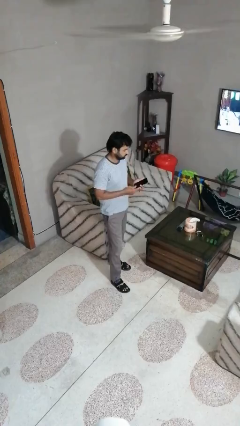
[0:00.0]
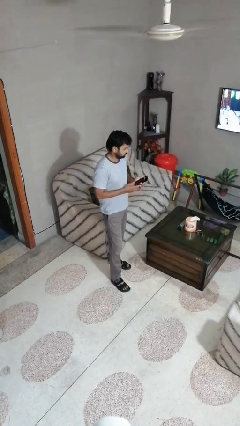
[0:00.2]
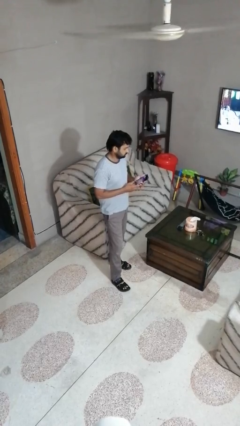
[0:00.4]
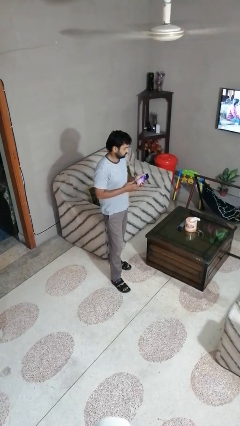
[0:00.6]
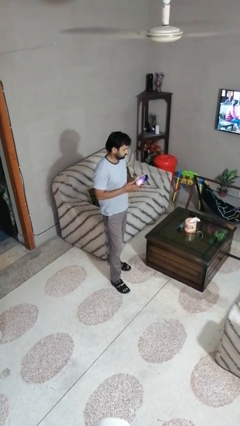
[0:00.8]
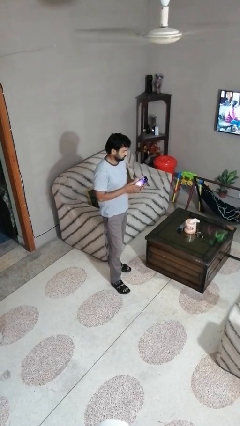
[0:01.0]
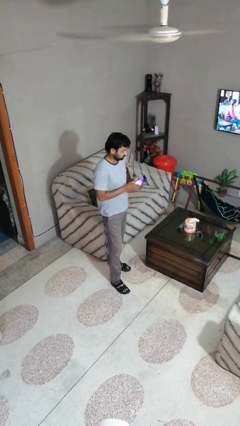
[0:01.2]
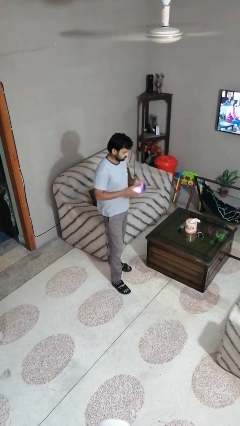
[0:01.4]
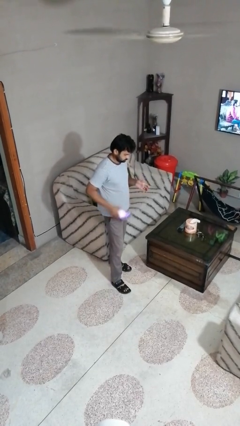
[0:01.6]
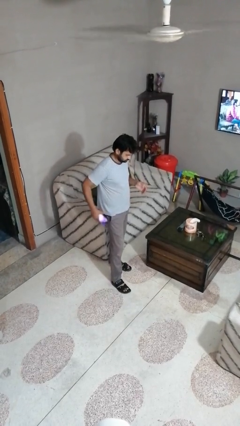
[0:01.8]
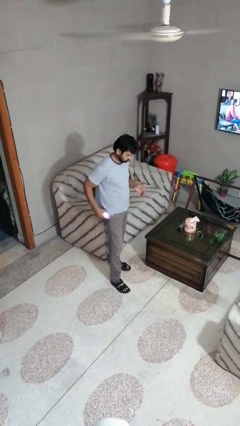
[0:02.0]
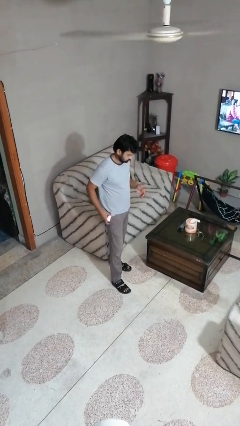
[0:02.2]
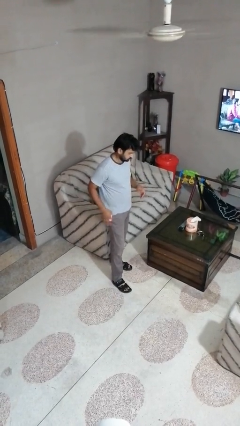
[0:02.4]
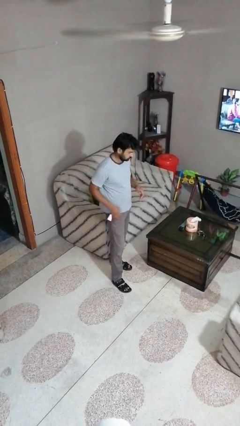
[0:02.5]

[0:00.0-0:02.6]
person puts phone into pocket

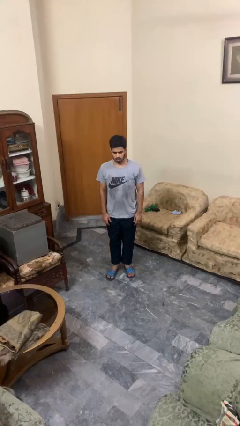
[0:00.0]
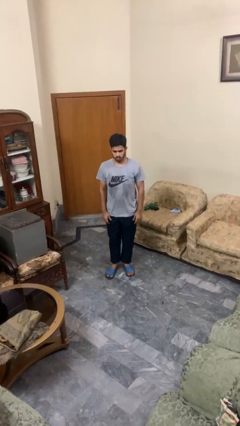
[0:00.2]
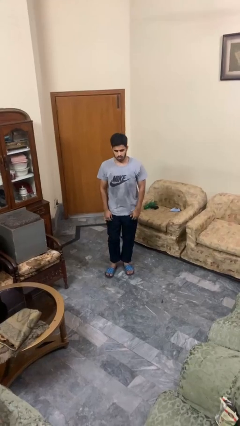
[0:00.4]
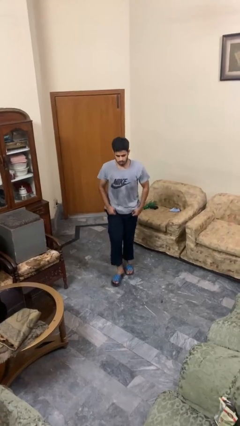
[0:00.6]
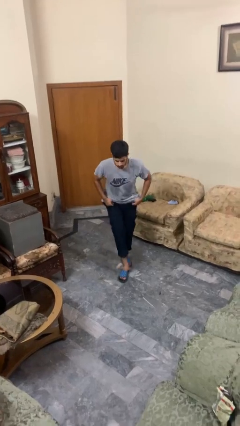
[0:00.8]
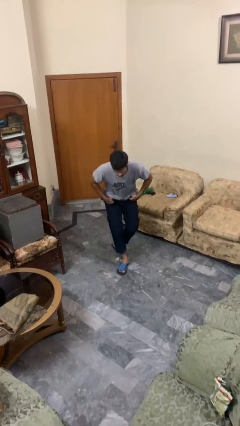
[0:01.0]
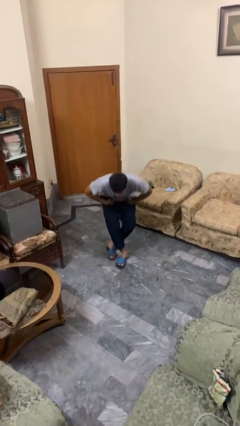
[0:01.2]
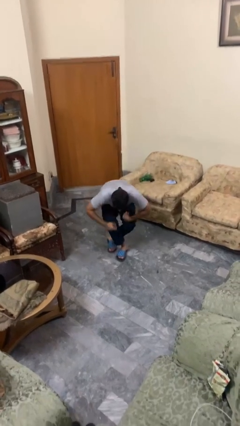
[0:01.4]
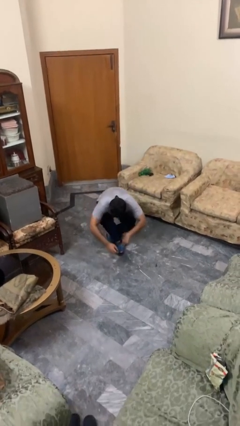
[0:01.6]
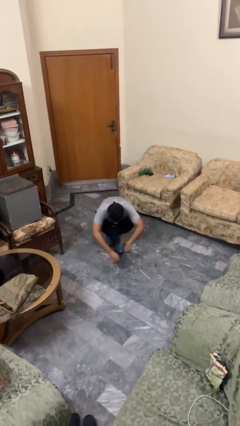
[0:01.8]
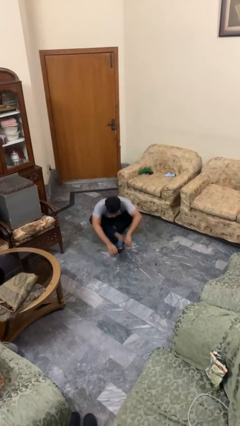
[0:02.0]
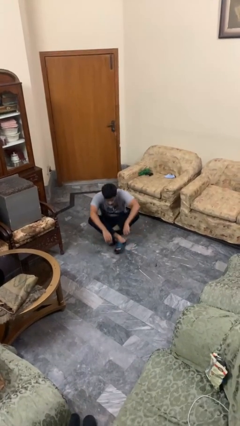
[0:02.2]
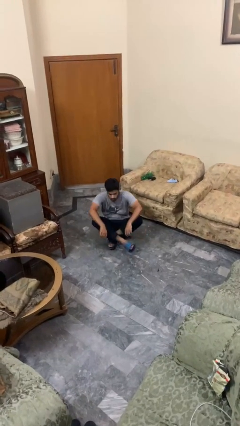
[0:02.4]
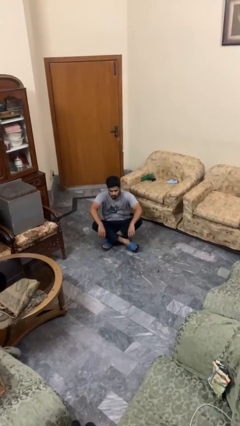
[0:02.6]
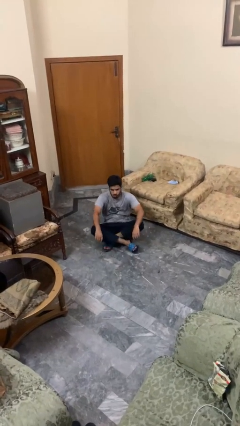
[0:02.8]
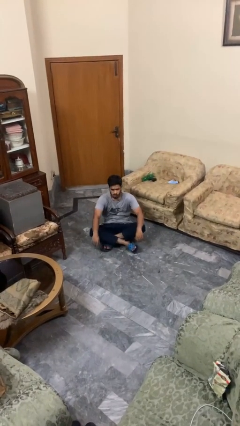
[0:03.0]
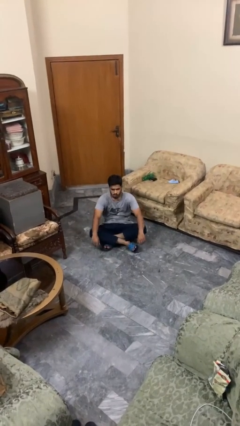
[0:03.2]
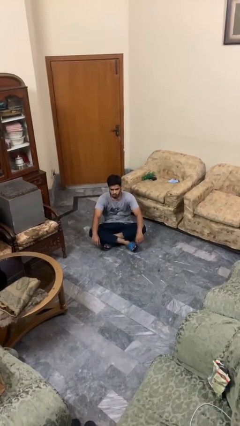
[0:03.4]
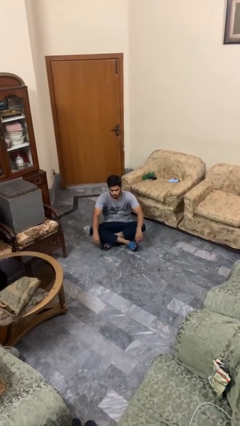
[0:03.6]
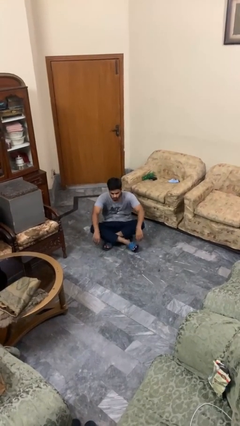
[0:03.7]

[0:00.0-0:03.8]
person sits crisscross

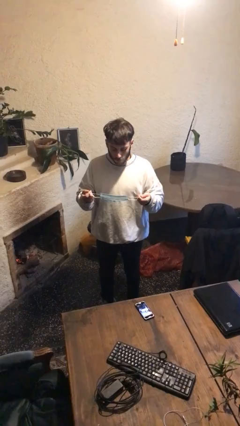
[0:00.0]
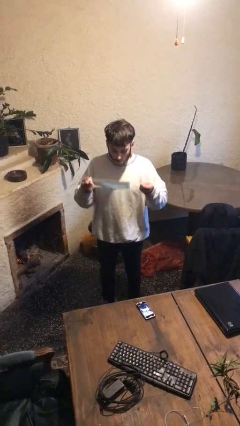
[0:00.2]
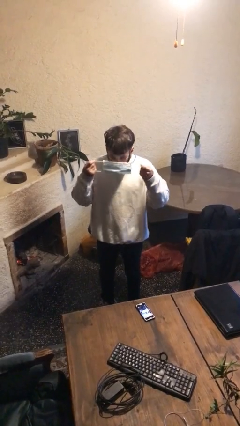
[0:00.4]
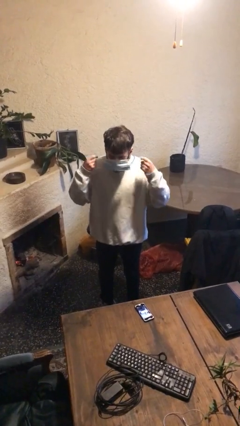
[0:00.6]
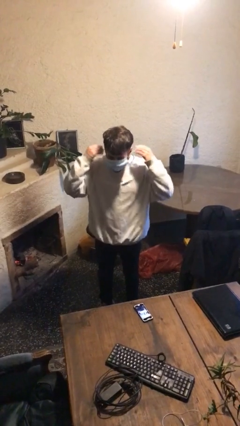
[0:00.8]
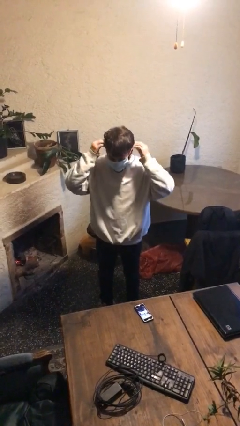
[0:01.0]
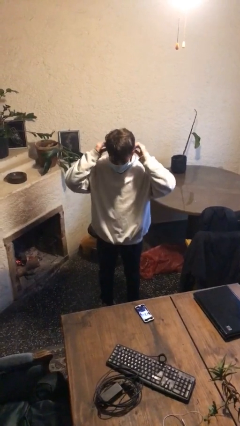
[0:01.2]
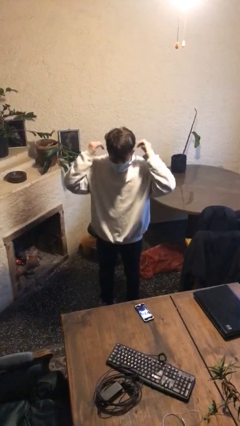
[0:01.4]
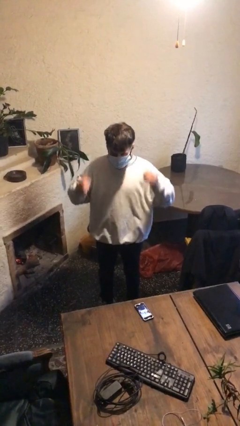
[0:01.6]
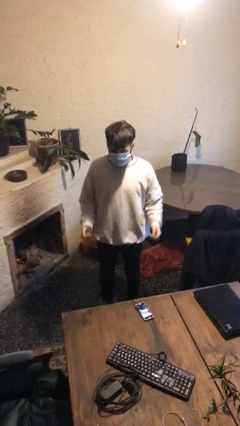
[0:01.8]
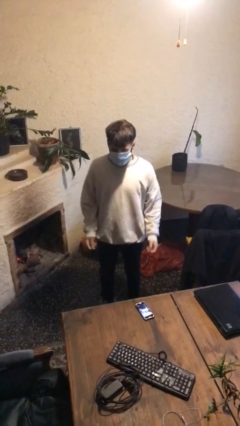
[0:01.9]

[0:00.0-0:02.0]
person puts on facemask

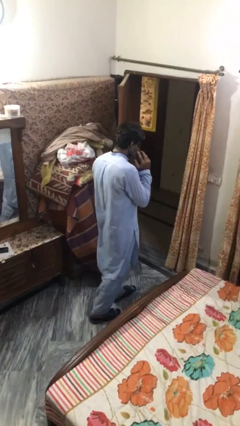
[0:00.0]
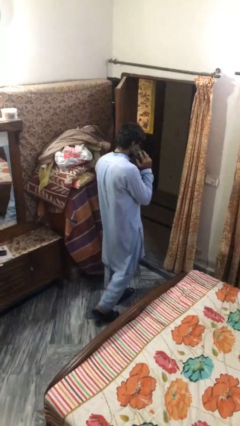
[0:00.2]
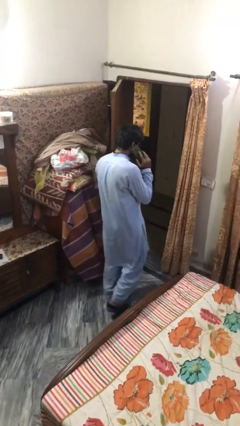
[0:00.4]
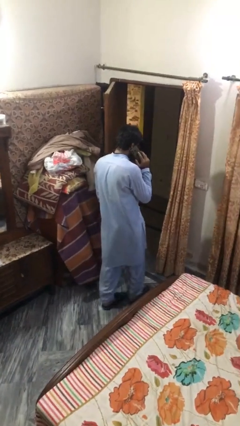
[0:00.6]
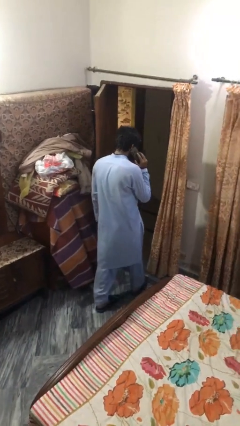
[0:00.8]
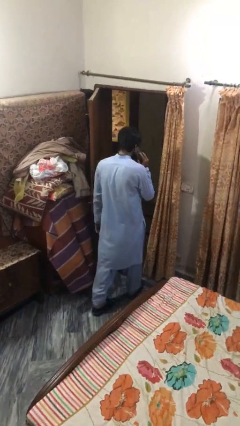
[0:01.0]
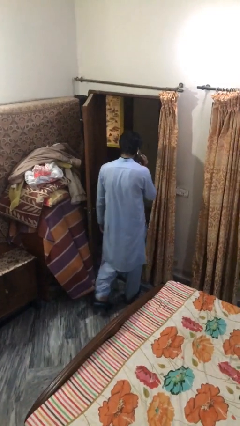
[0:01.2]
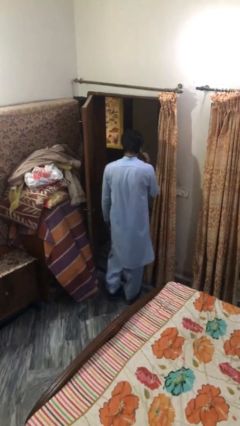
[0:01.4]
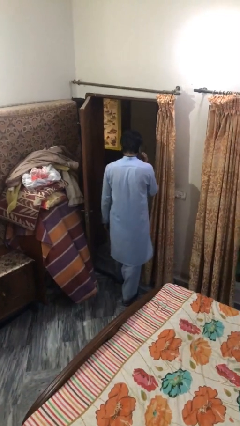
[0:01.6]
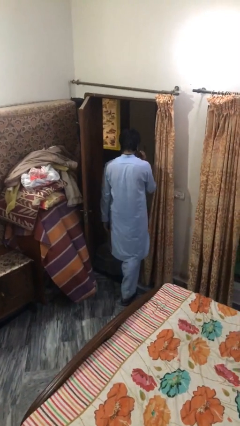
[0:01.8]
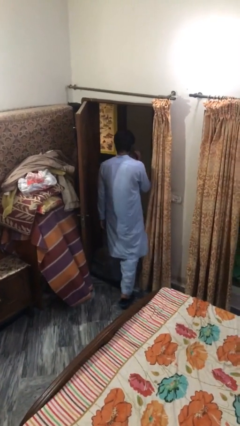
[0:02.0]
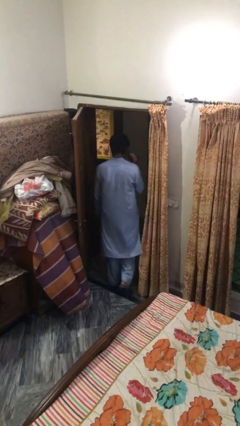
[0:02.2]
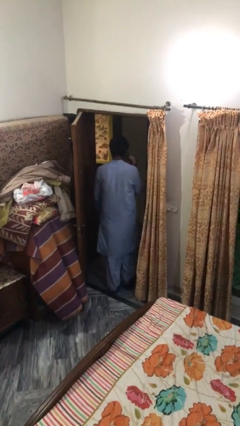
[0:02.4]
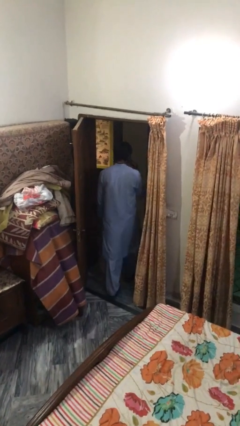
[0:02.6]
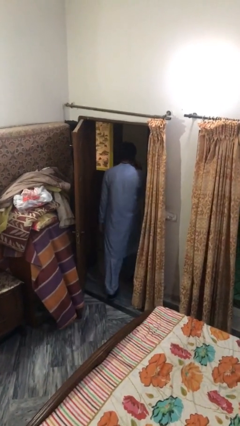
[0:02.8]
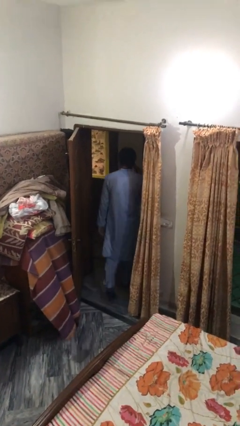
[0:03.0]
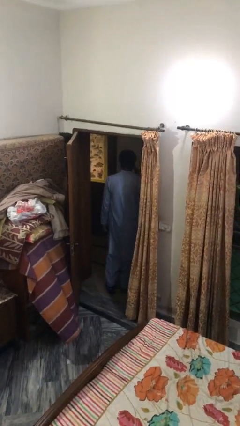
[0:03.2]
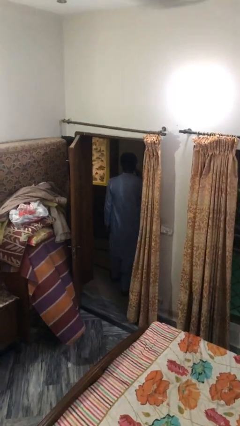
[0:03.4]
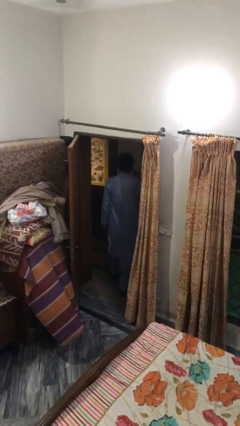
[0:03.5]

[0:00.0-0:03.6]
person exits scene through structure

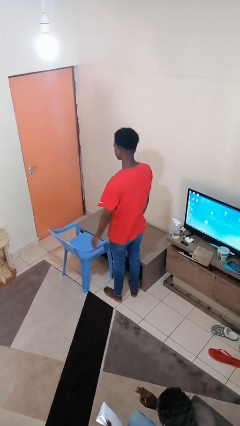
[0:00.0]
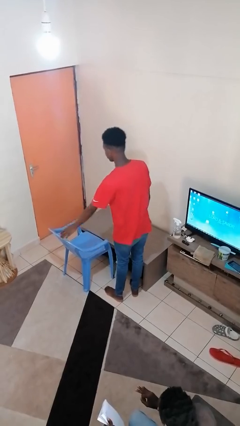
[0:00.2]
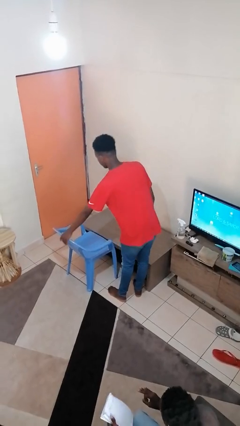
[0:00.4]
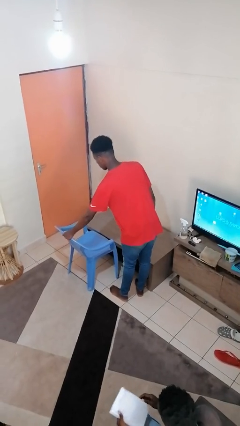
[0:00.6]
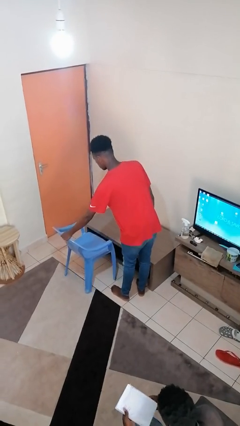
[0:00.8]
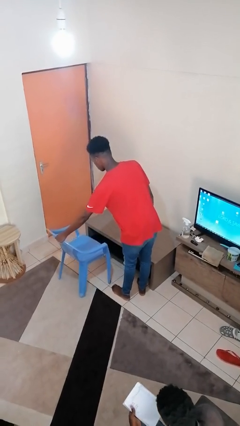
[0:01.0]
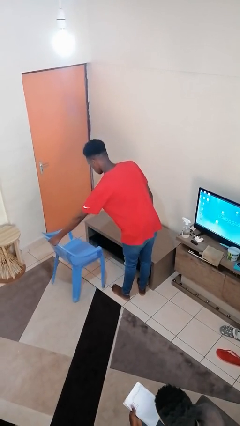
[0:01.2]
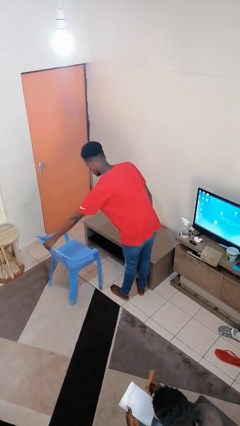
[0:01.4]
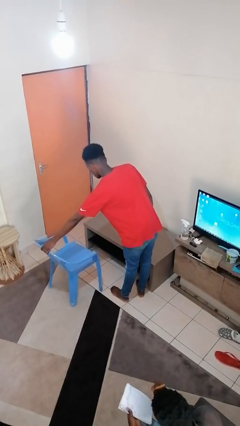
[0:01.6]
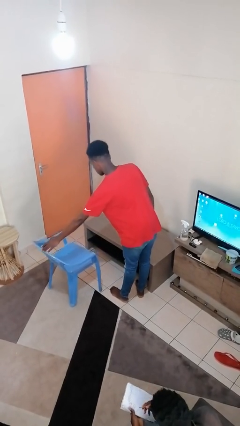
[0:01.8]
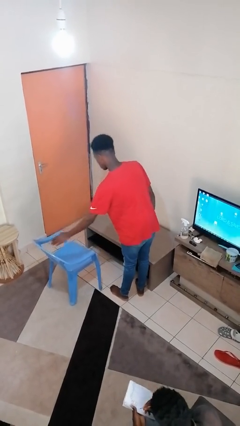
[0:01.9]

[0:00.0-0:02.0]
person pulls out chair

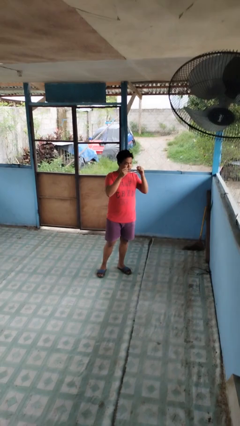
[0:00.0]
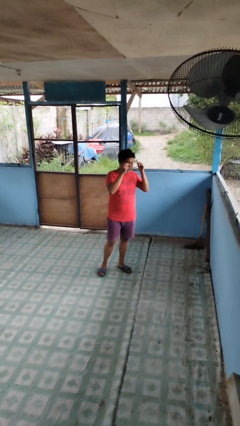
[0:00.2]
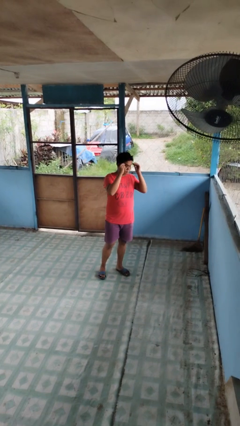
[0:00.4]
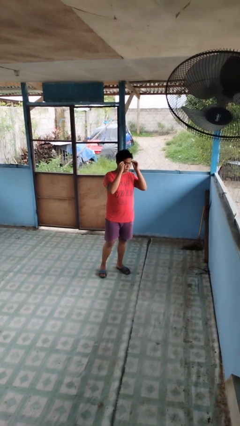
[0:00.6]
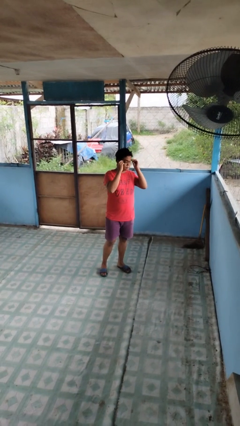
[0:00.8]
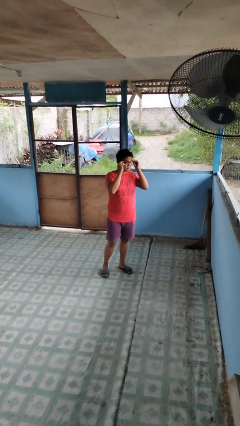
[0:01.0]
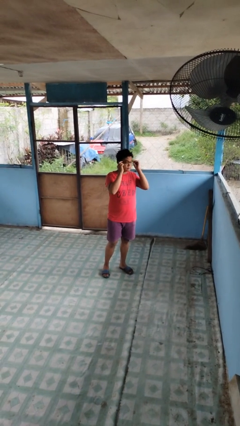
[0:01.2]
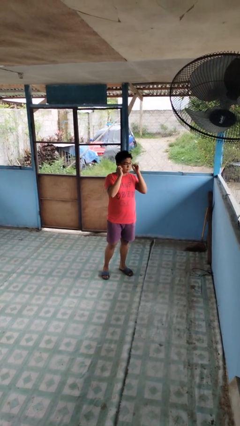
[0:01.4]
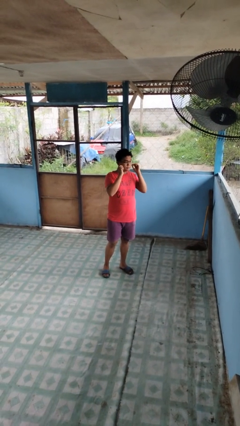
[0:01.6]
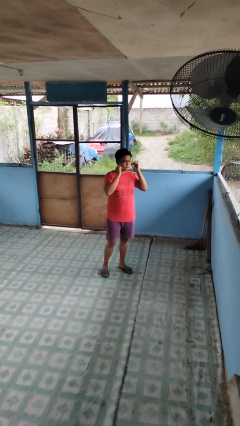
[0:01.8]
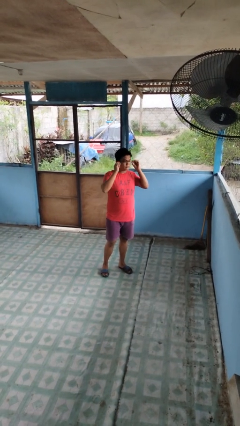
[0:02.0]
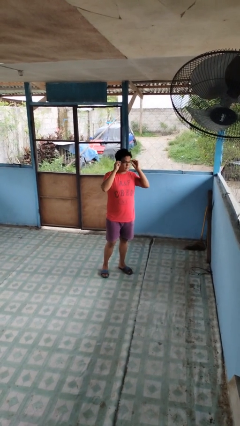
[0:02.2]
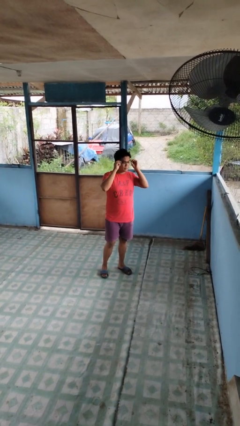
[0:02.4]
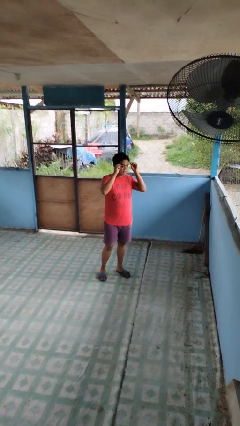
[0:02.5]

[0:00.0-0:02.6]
person puts on glasses

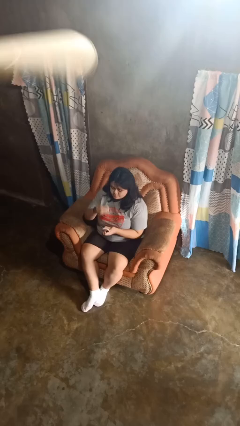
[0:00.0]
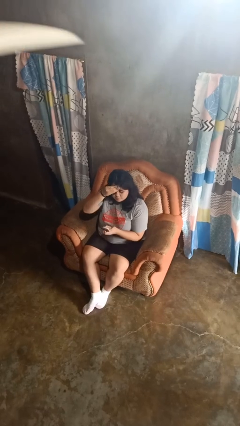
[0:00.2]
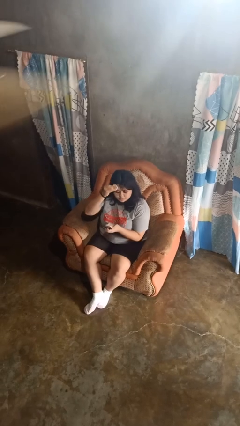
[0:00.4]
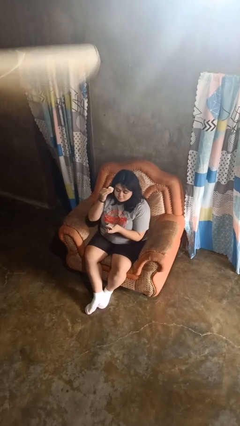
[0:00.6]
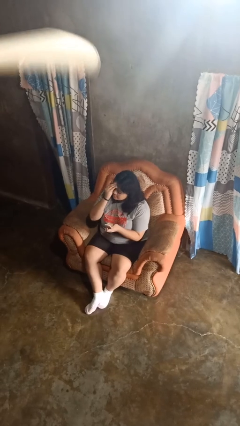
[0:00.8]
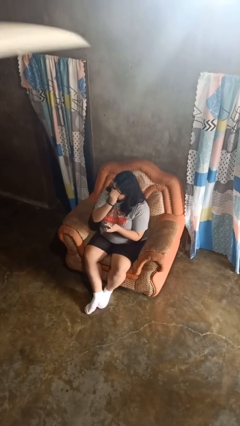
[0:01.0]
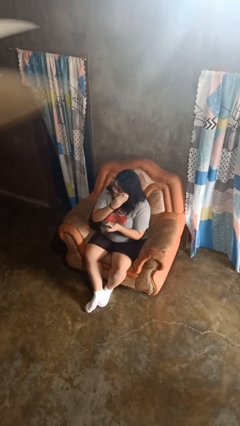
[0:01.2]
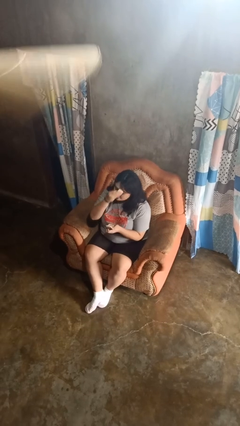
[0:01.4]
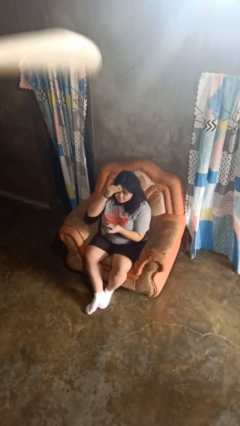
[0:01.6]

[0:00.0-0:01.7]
person applies foundation makeup
